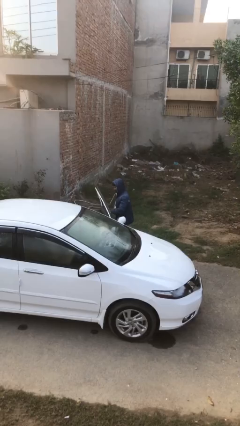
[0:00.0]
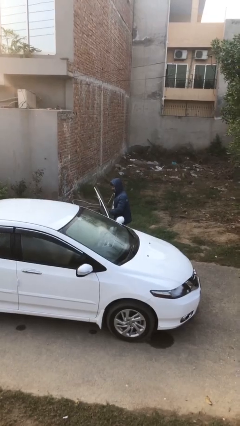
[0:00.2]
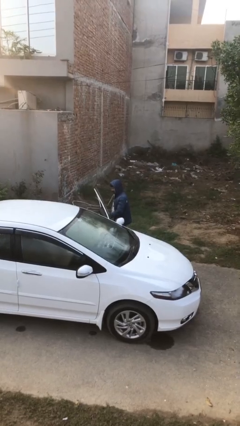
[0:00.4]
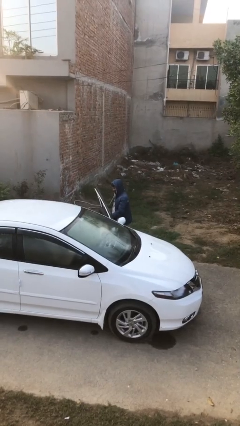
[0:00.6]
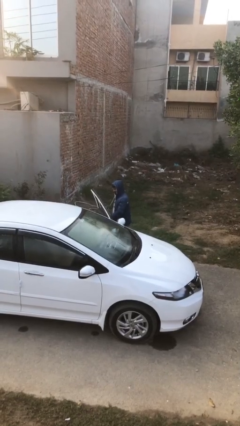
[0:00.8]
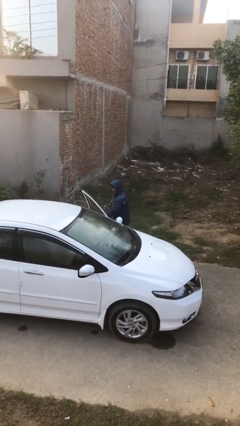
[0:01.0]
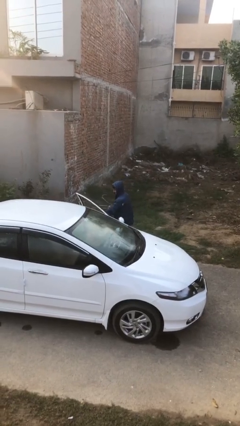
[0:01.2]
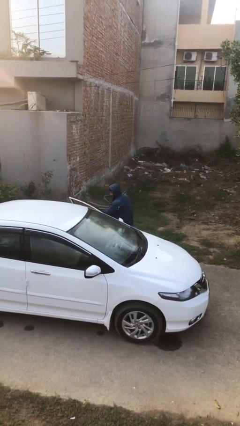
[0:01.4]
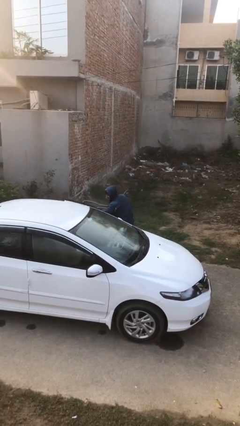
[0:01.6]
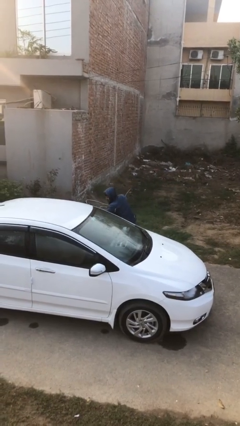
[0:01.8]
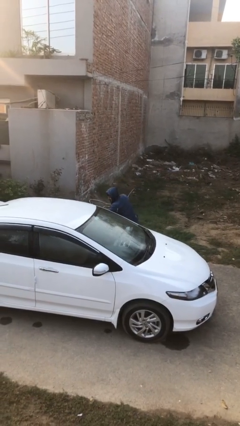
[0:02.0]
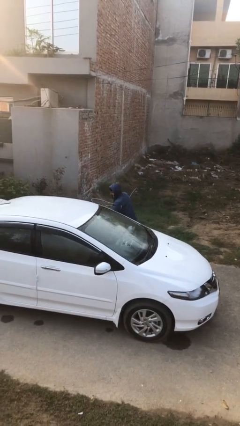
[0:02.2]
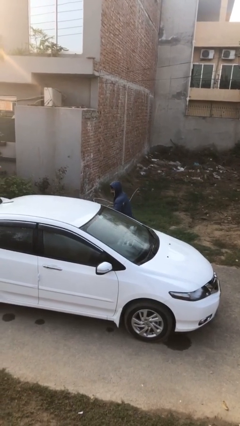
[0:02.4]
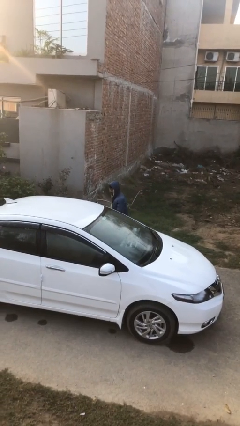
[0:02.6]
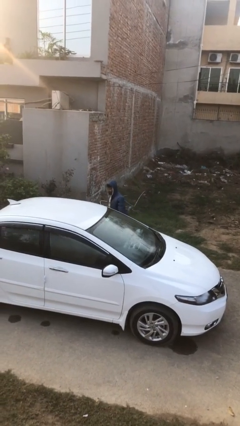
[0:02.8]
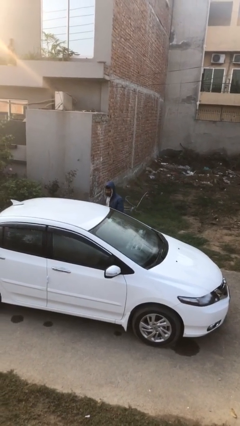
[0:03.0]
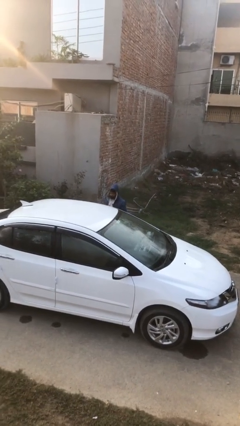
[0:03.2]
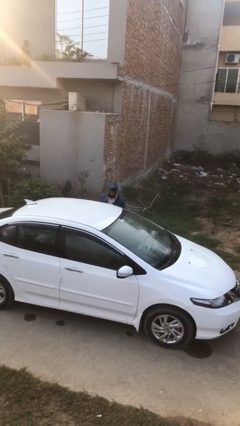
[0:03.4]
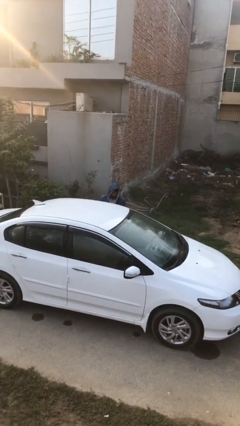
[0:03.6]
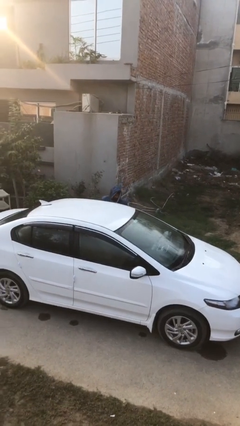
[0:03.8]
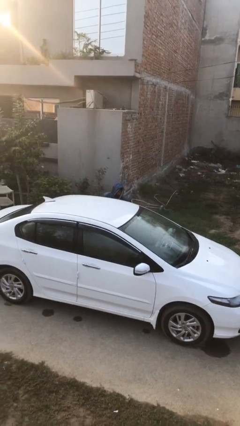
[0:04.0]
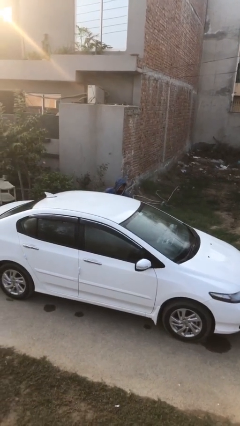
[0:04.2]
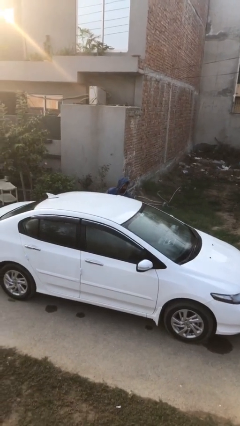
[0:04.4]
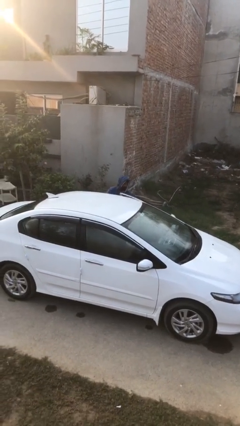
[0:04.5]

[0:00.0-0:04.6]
person closes car door

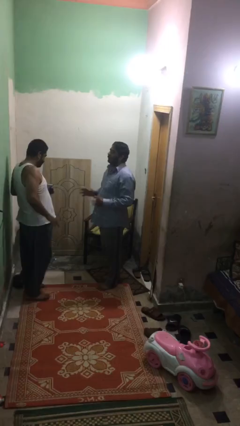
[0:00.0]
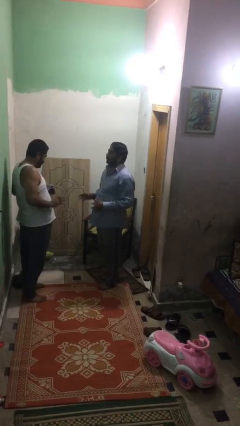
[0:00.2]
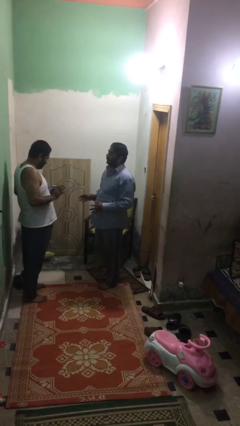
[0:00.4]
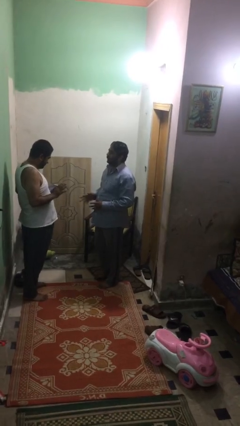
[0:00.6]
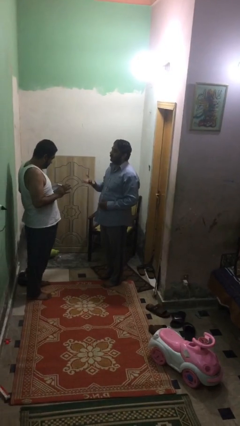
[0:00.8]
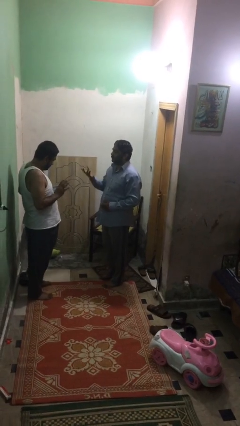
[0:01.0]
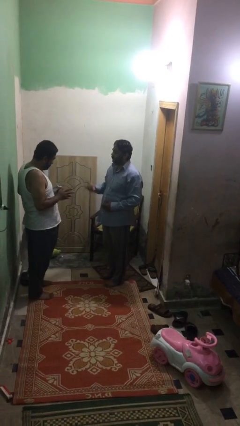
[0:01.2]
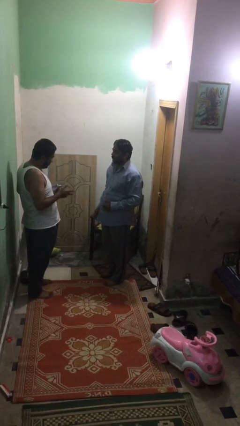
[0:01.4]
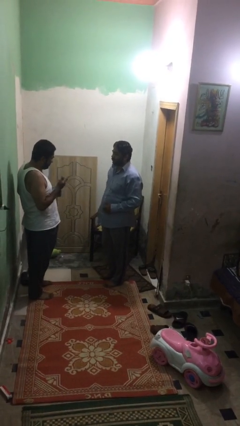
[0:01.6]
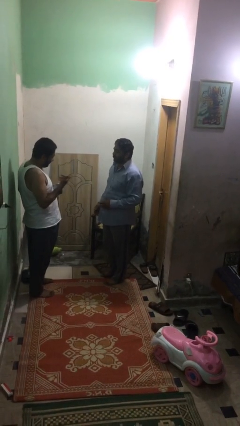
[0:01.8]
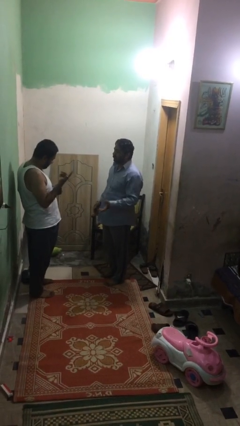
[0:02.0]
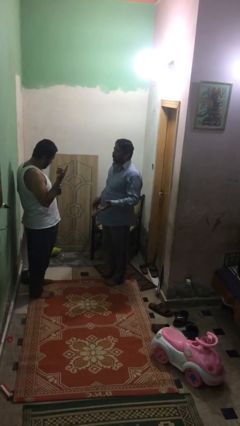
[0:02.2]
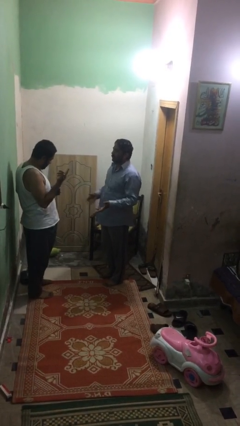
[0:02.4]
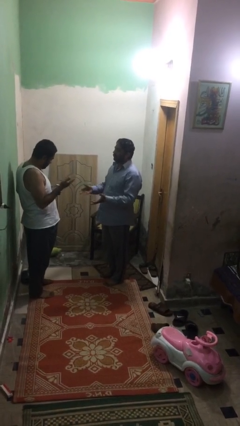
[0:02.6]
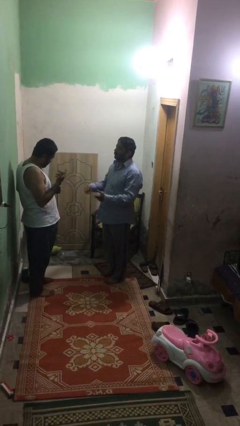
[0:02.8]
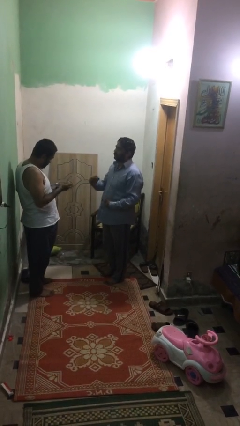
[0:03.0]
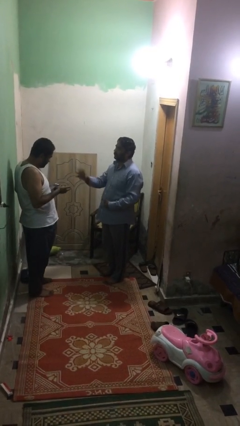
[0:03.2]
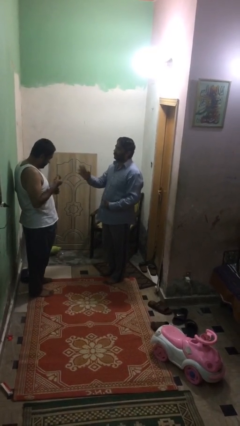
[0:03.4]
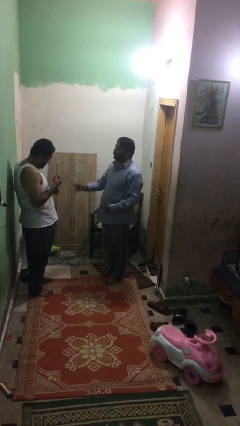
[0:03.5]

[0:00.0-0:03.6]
person talks to person

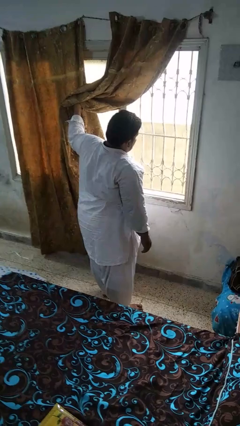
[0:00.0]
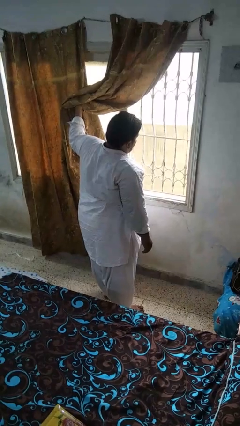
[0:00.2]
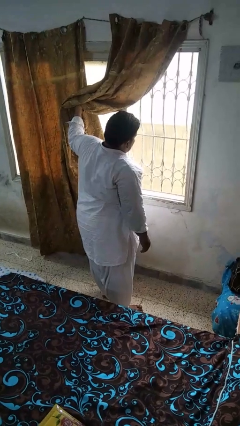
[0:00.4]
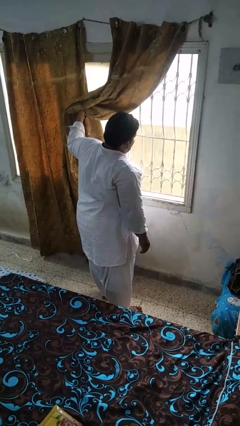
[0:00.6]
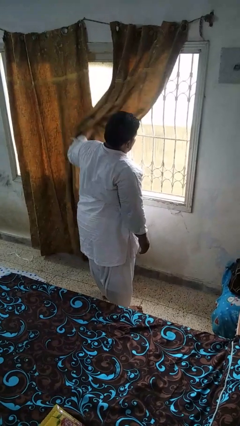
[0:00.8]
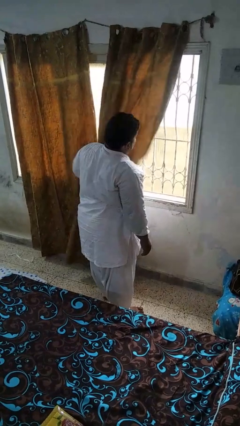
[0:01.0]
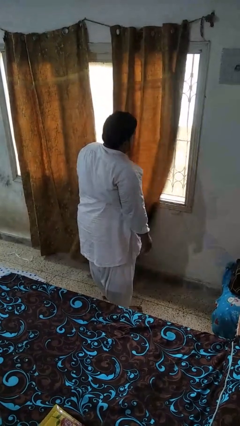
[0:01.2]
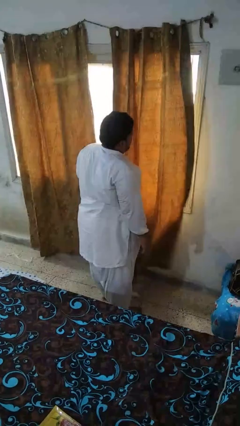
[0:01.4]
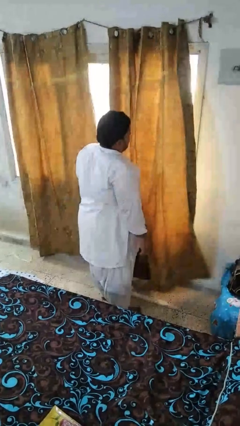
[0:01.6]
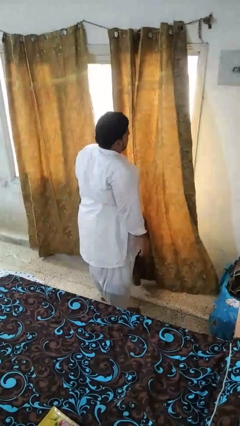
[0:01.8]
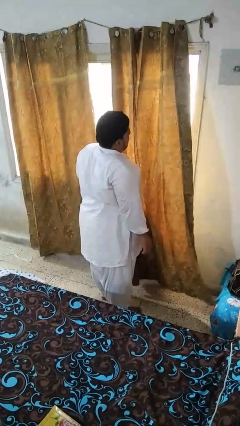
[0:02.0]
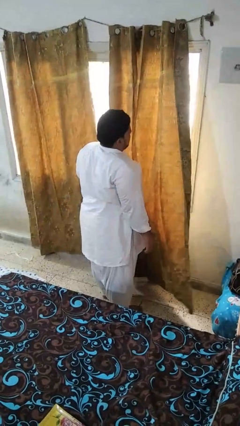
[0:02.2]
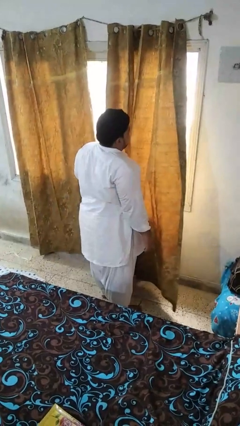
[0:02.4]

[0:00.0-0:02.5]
person closes curtains

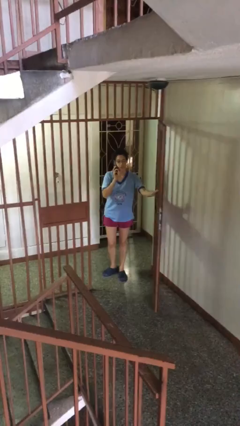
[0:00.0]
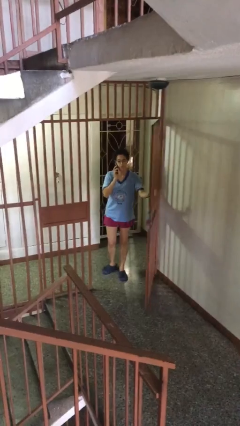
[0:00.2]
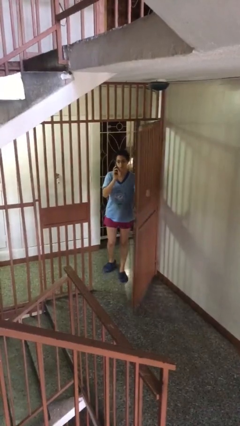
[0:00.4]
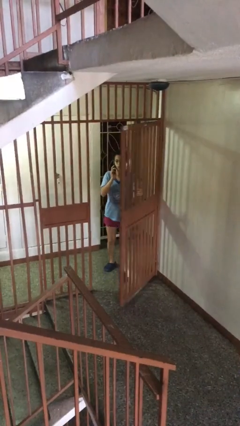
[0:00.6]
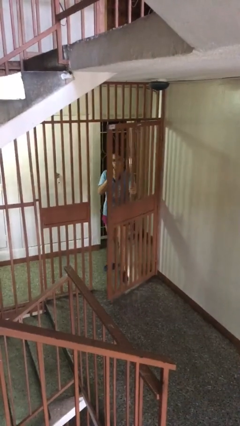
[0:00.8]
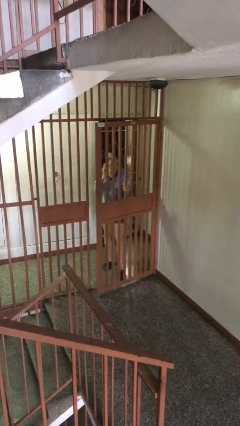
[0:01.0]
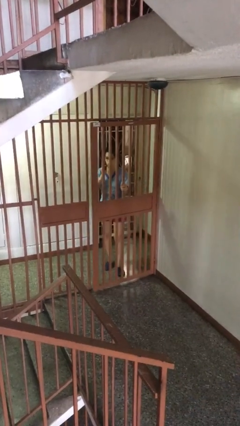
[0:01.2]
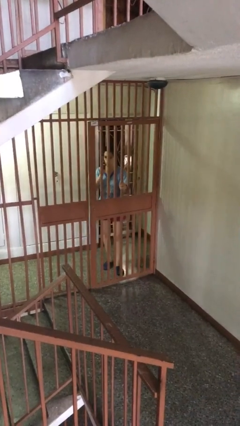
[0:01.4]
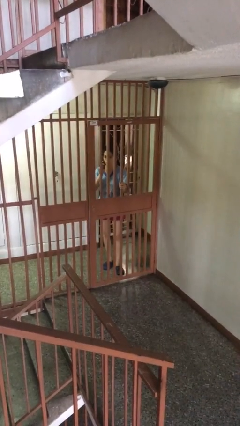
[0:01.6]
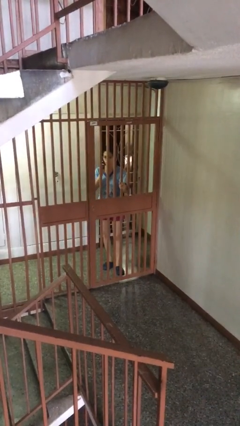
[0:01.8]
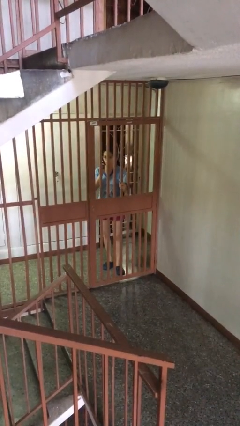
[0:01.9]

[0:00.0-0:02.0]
person closes facility door

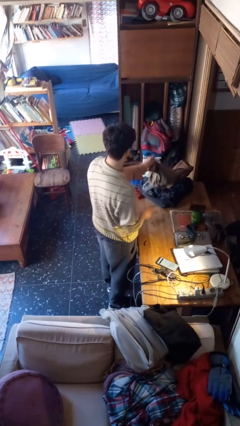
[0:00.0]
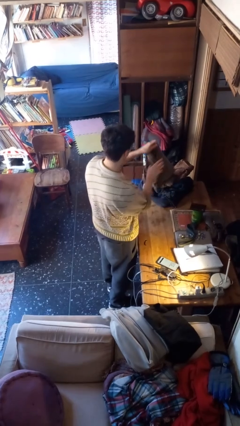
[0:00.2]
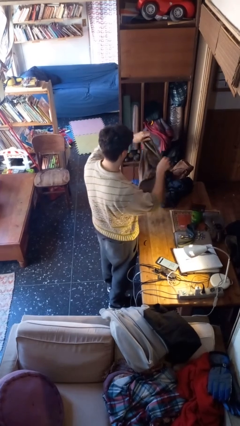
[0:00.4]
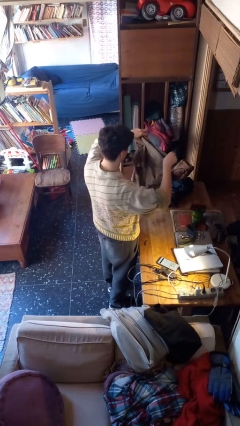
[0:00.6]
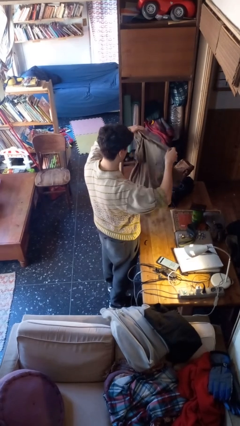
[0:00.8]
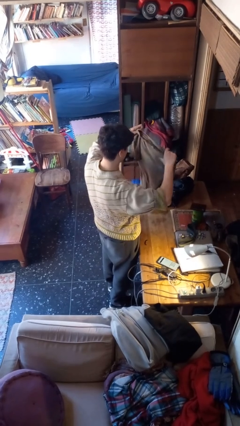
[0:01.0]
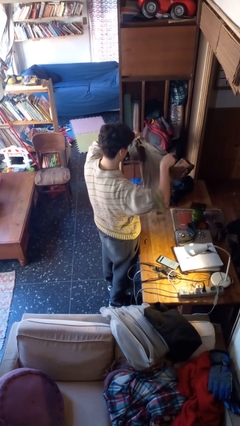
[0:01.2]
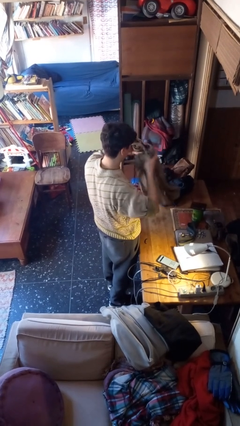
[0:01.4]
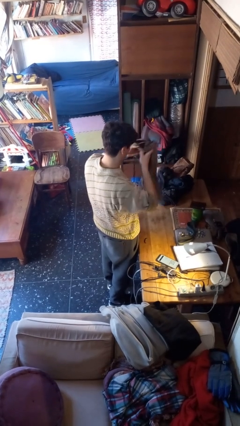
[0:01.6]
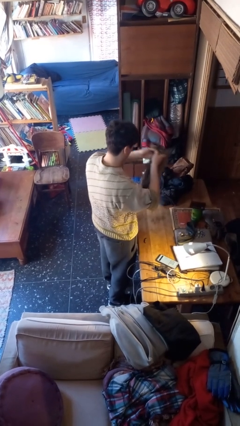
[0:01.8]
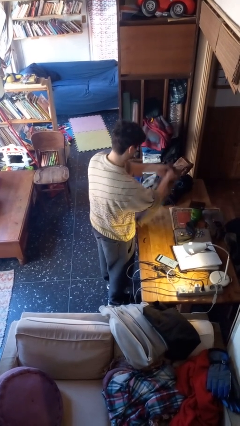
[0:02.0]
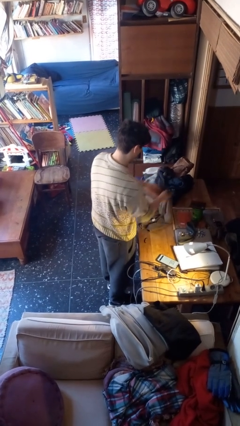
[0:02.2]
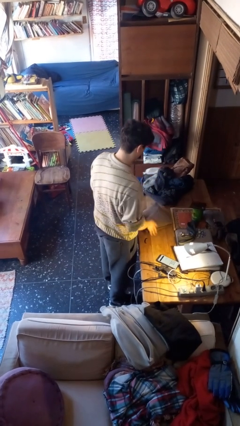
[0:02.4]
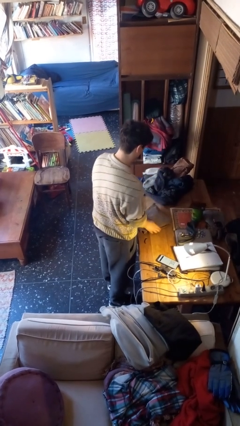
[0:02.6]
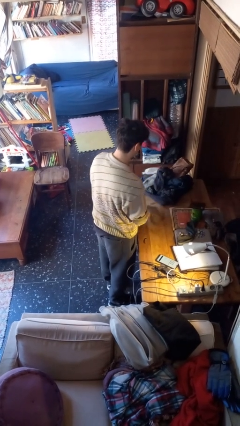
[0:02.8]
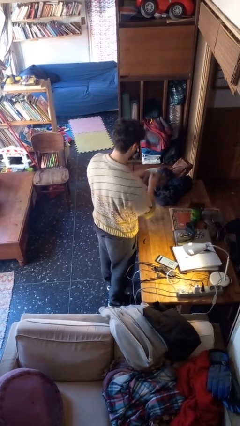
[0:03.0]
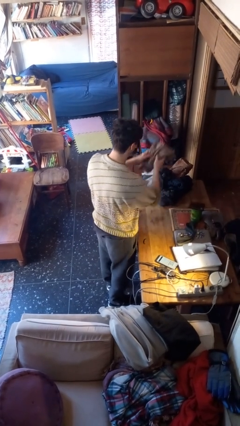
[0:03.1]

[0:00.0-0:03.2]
person folds shirt

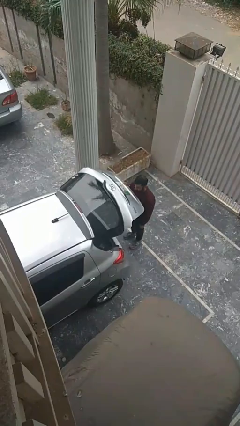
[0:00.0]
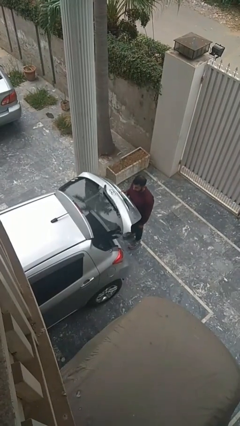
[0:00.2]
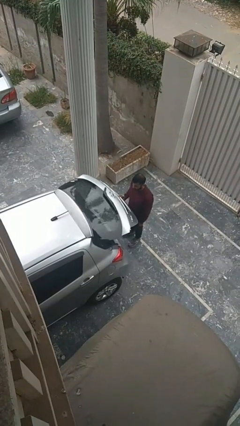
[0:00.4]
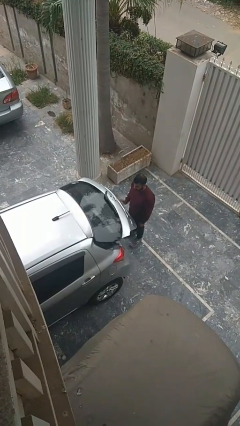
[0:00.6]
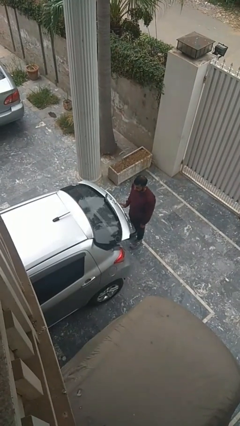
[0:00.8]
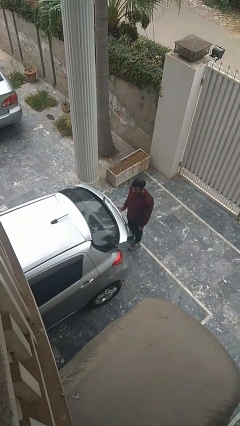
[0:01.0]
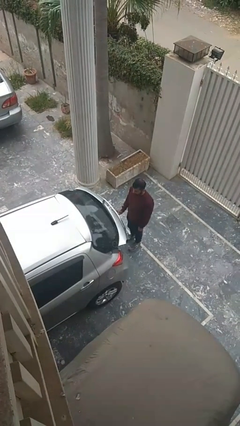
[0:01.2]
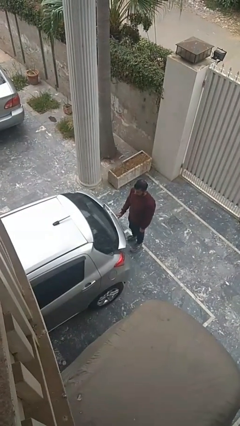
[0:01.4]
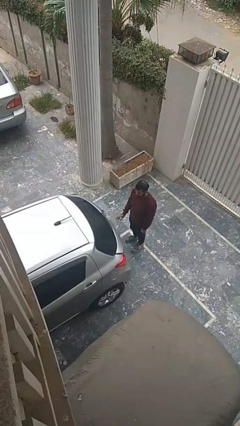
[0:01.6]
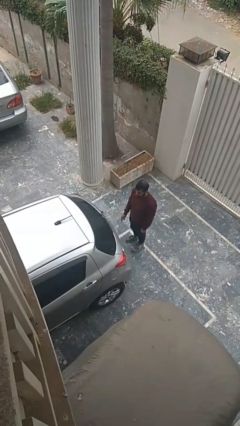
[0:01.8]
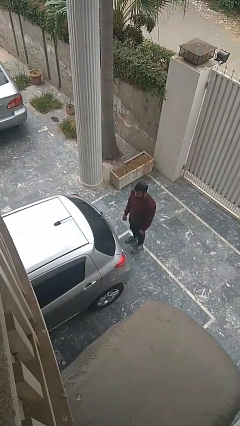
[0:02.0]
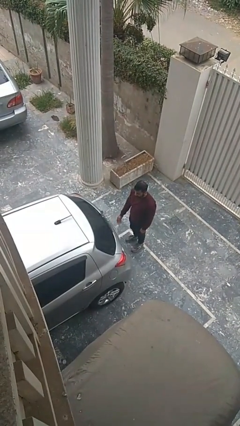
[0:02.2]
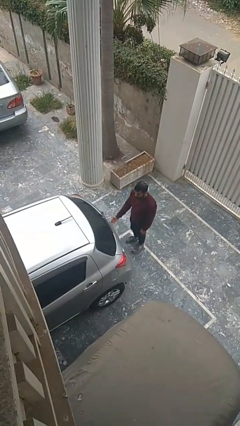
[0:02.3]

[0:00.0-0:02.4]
person closes car trunk
